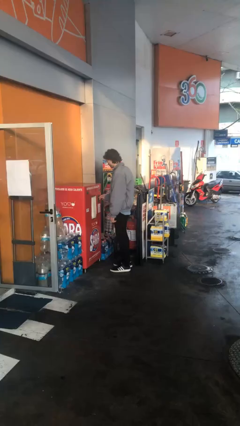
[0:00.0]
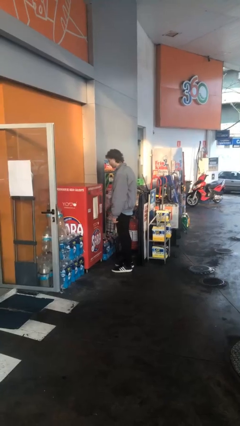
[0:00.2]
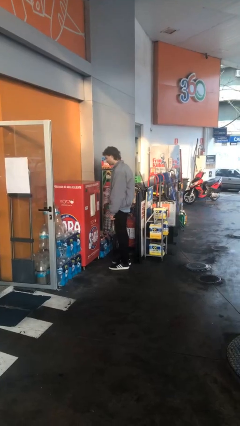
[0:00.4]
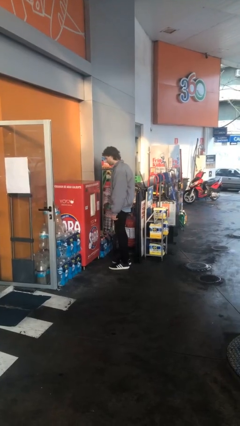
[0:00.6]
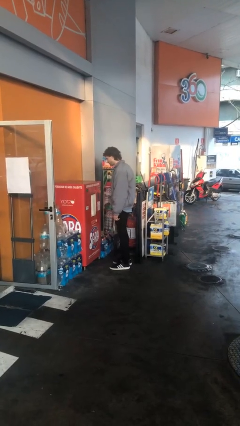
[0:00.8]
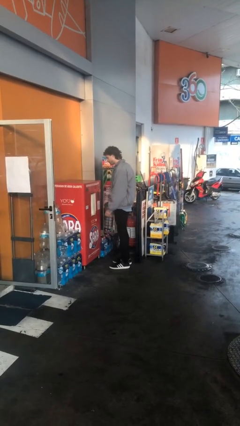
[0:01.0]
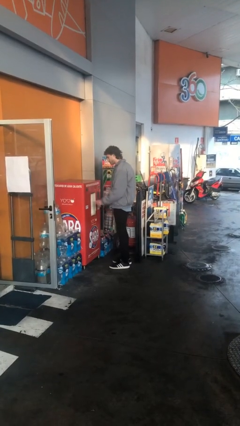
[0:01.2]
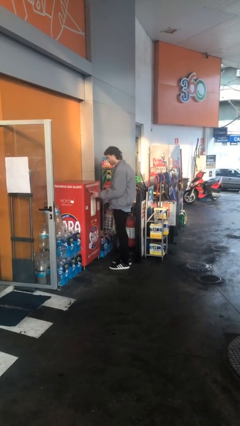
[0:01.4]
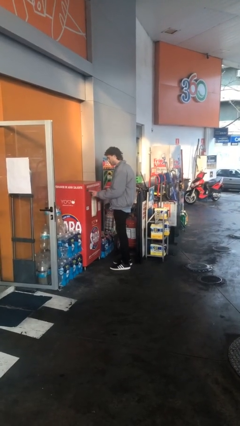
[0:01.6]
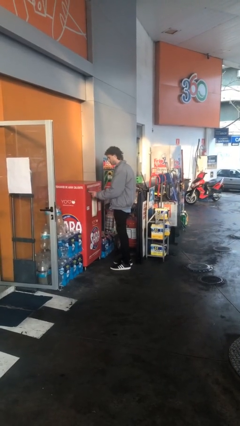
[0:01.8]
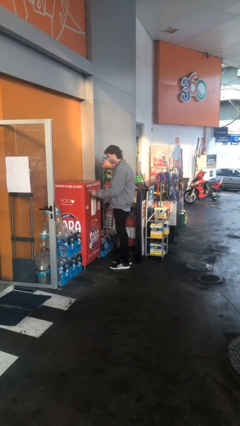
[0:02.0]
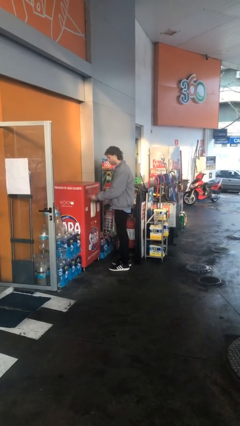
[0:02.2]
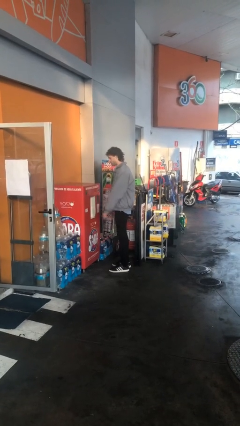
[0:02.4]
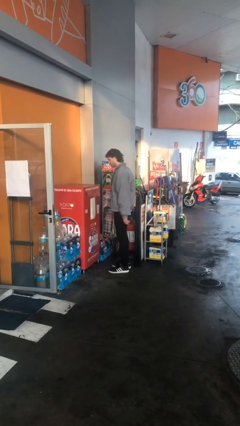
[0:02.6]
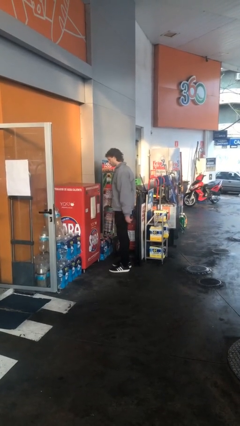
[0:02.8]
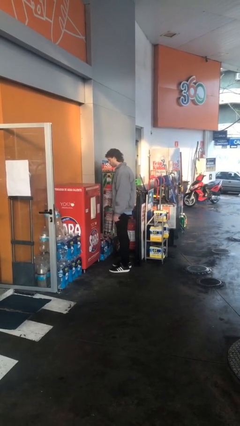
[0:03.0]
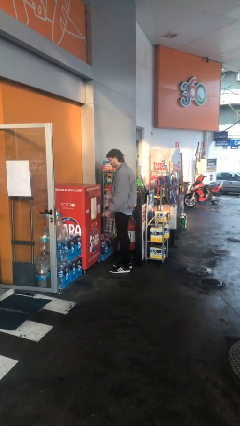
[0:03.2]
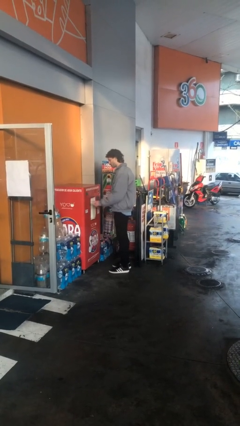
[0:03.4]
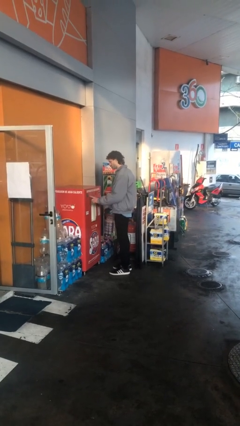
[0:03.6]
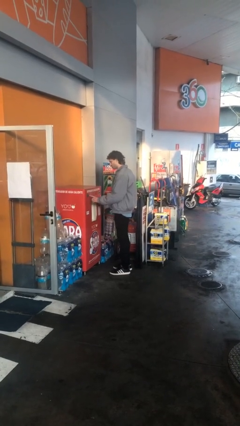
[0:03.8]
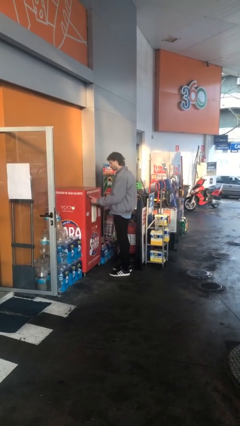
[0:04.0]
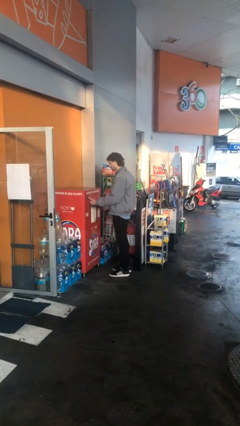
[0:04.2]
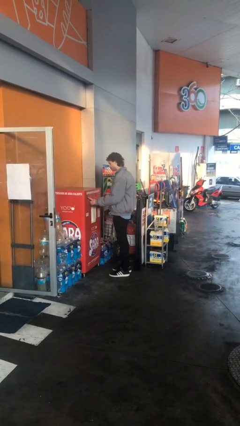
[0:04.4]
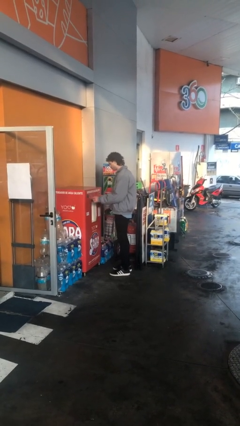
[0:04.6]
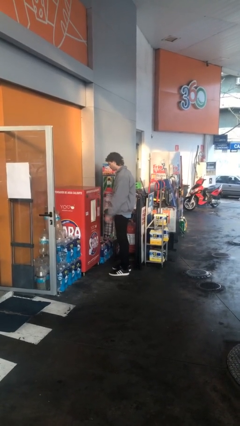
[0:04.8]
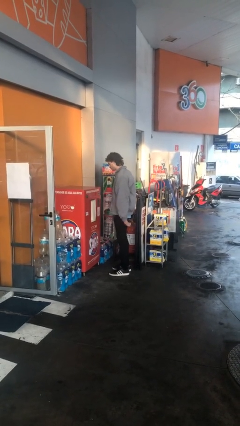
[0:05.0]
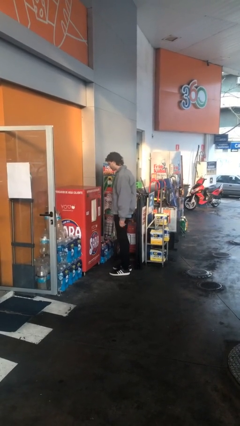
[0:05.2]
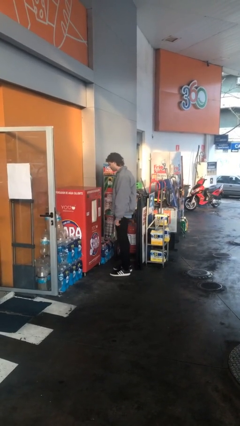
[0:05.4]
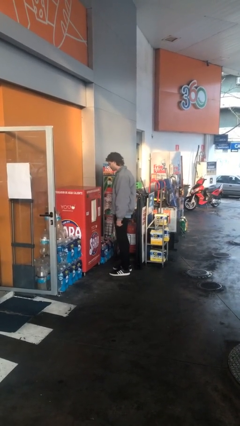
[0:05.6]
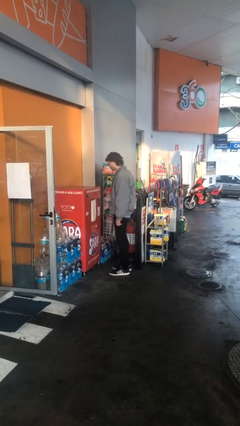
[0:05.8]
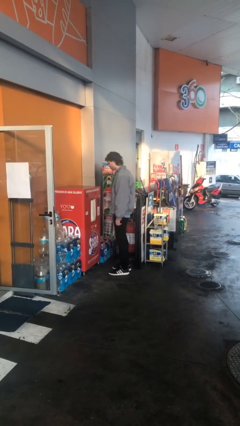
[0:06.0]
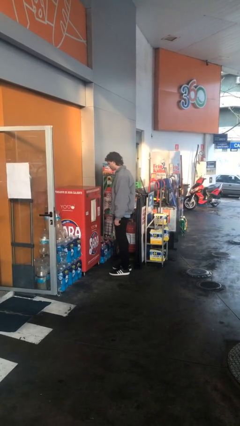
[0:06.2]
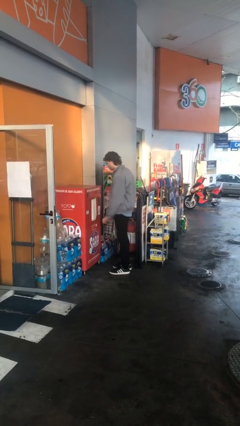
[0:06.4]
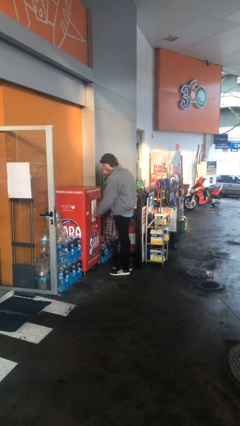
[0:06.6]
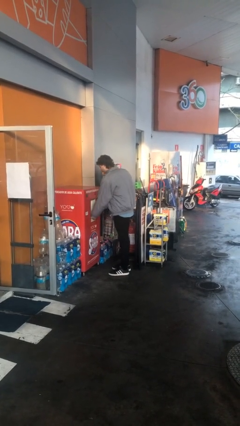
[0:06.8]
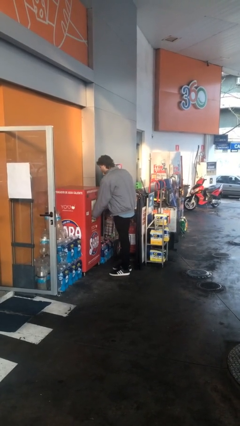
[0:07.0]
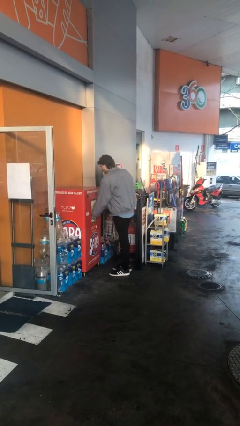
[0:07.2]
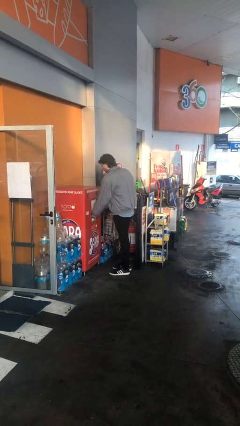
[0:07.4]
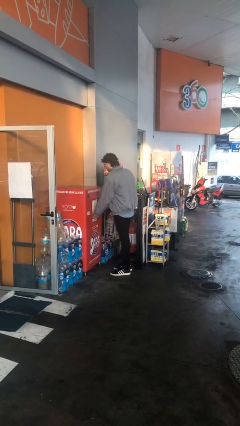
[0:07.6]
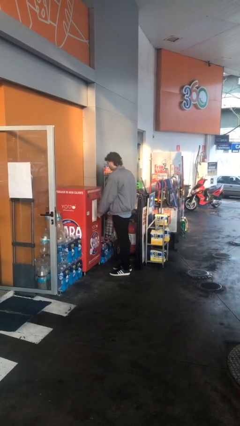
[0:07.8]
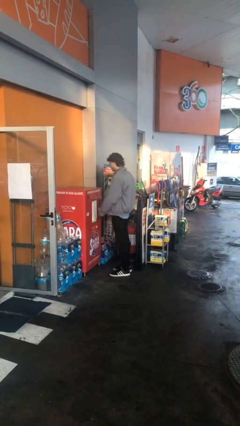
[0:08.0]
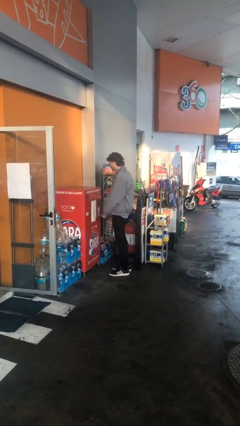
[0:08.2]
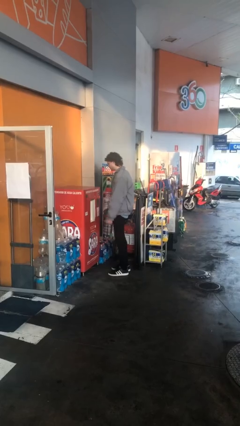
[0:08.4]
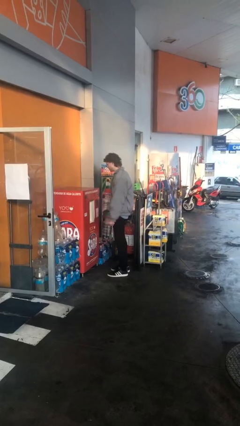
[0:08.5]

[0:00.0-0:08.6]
person purchases from machine

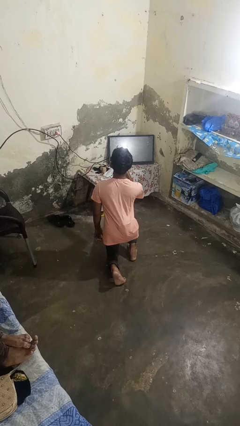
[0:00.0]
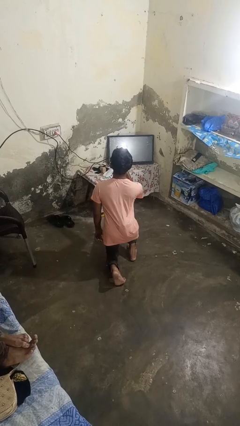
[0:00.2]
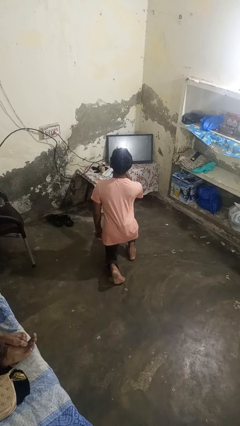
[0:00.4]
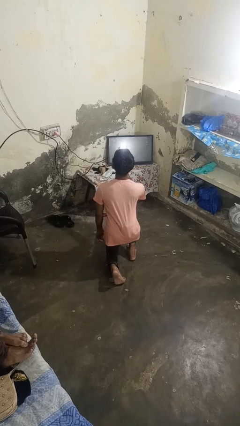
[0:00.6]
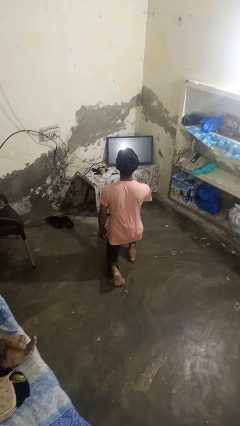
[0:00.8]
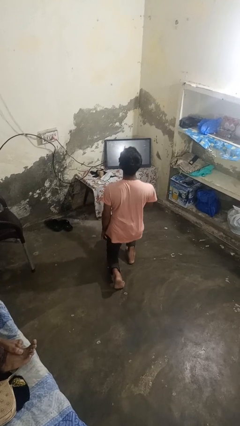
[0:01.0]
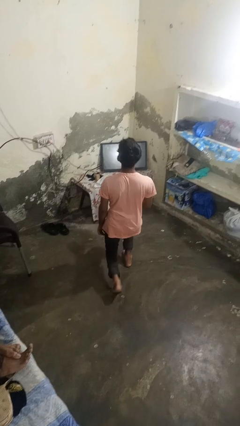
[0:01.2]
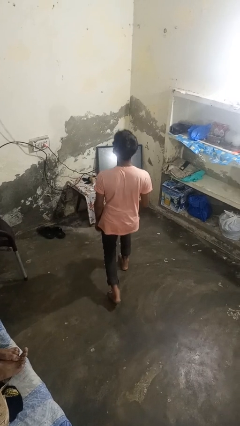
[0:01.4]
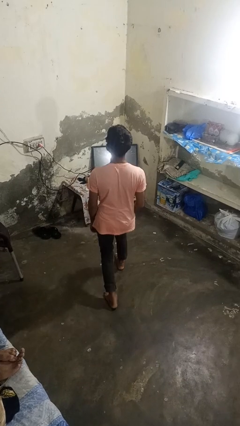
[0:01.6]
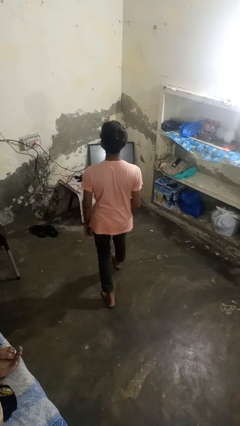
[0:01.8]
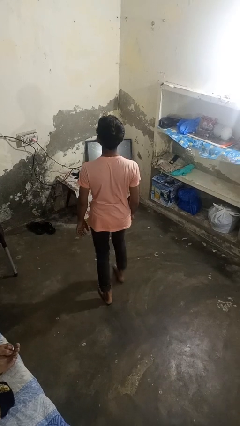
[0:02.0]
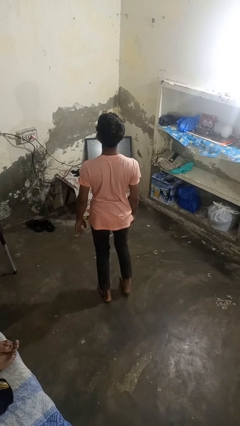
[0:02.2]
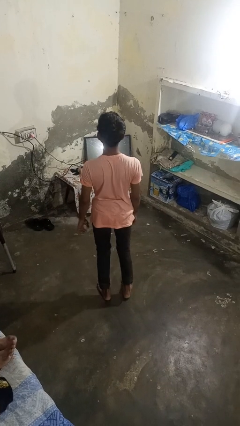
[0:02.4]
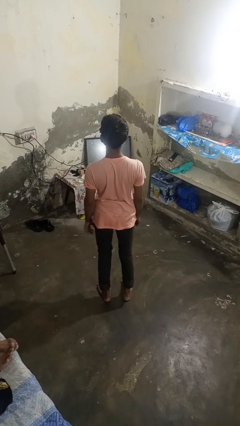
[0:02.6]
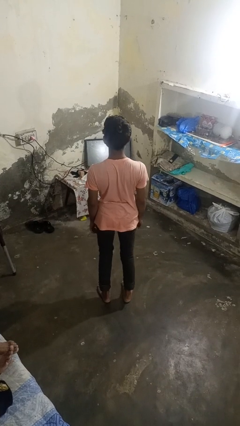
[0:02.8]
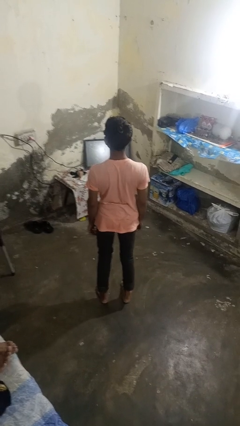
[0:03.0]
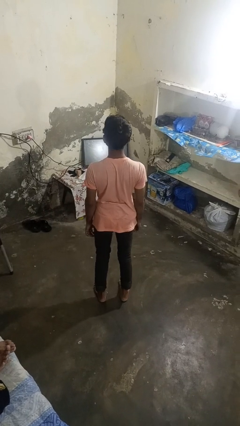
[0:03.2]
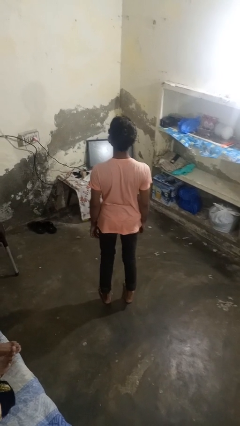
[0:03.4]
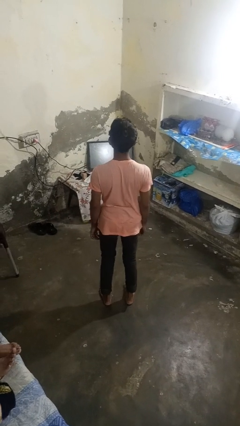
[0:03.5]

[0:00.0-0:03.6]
person stands up from floor

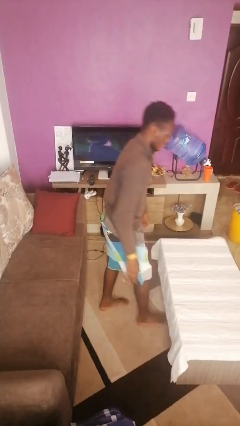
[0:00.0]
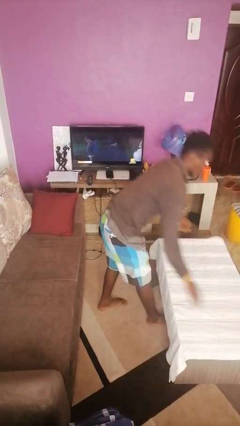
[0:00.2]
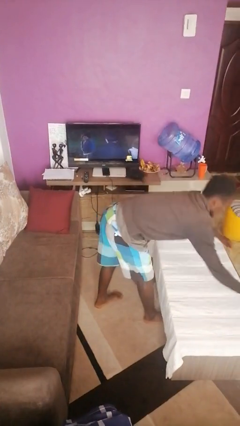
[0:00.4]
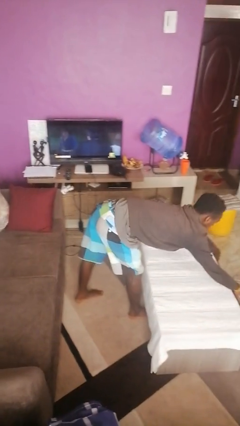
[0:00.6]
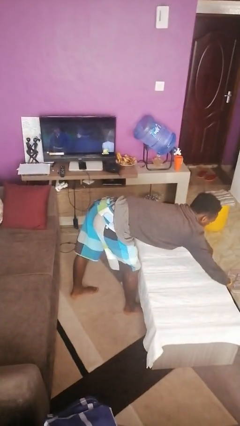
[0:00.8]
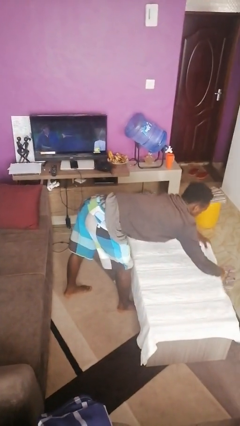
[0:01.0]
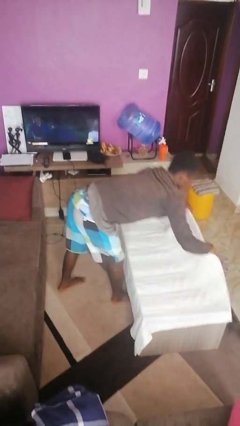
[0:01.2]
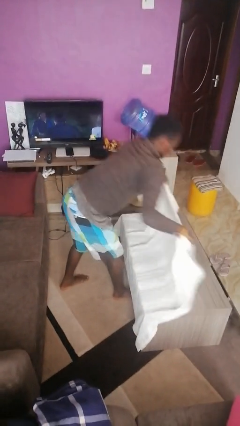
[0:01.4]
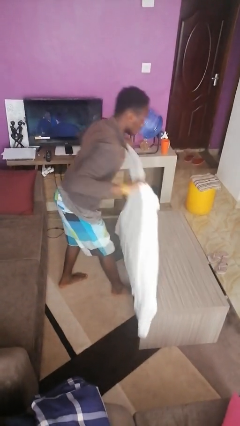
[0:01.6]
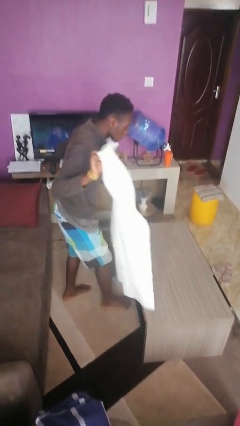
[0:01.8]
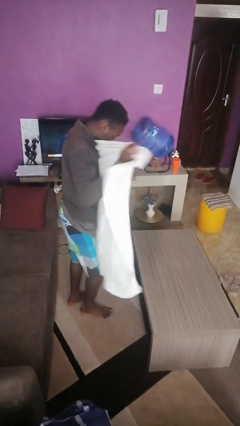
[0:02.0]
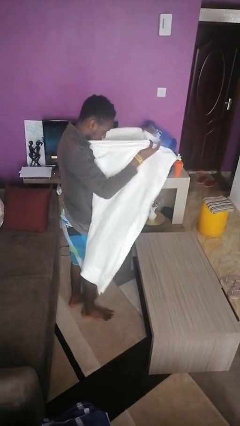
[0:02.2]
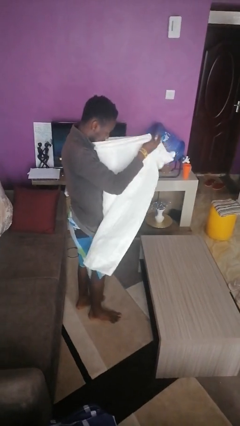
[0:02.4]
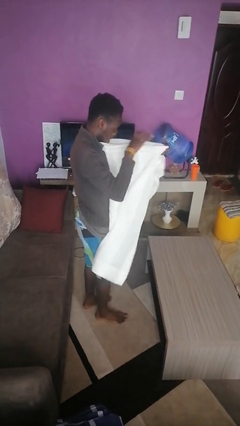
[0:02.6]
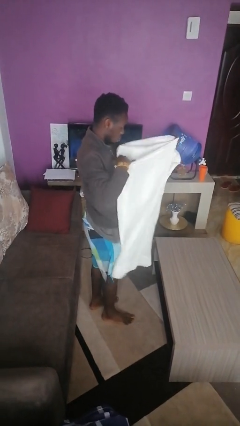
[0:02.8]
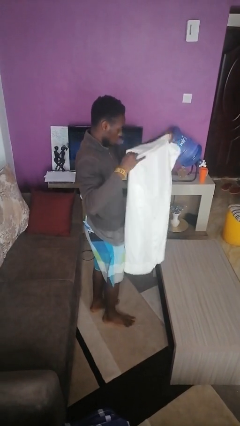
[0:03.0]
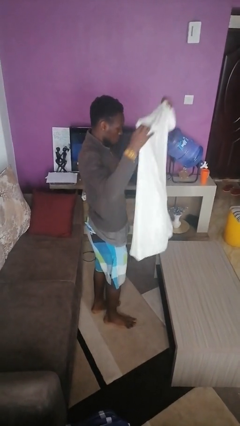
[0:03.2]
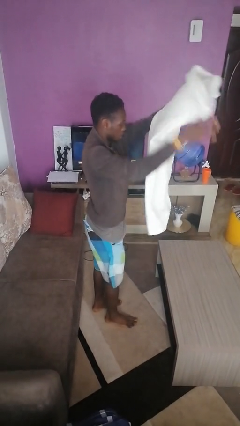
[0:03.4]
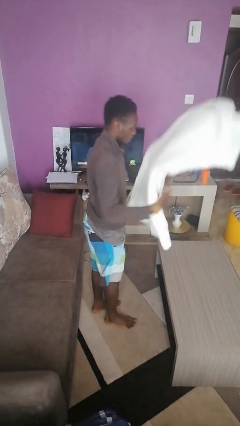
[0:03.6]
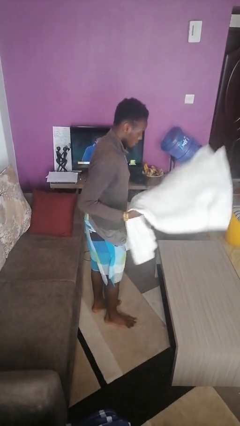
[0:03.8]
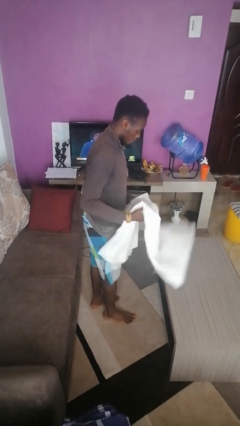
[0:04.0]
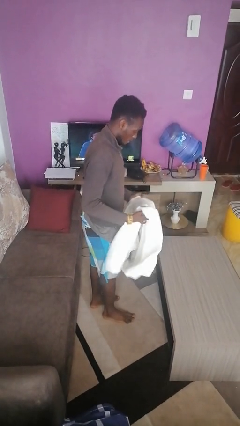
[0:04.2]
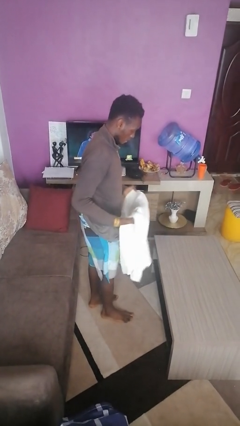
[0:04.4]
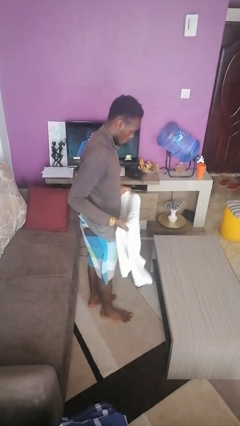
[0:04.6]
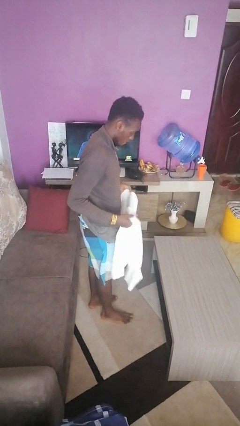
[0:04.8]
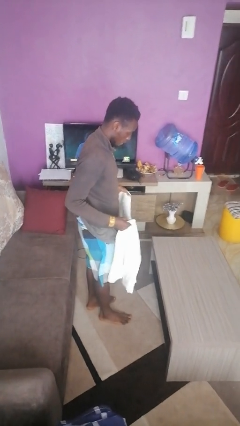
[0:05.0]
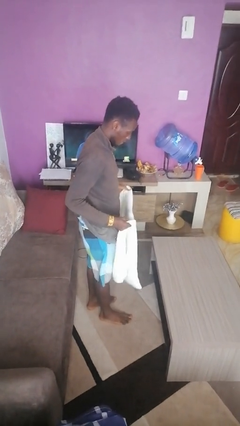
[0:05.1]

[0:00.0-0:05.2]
person folds tablecloth

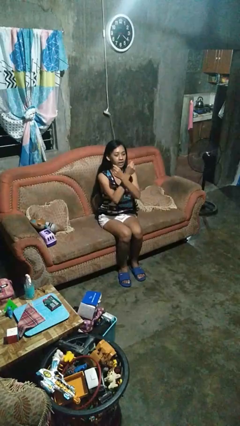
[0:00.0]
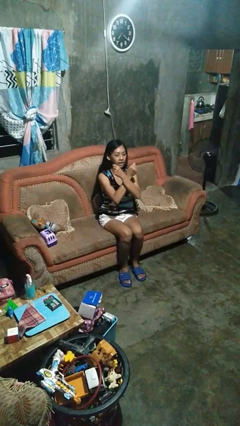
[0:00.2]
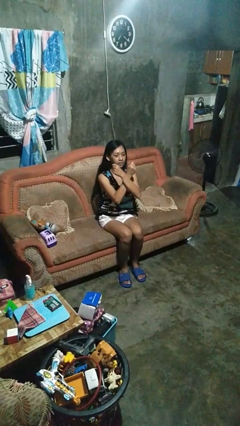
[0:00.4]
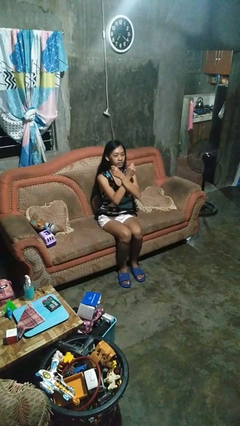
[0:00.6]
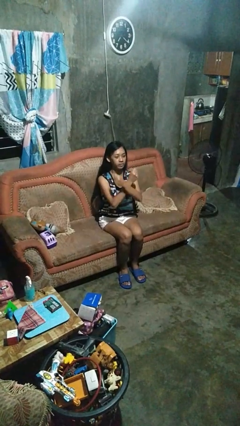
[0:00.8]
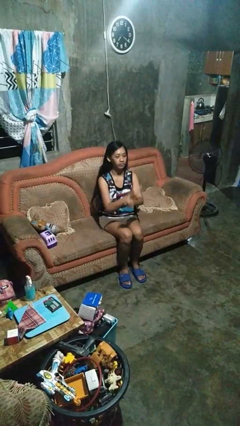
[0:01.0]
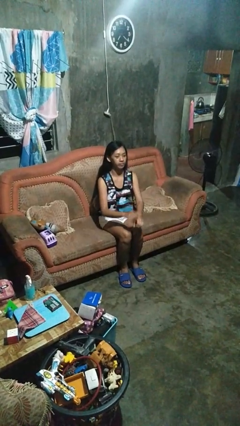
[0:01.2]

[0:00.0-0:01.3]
person gestures arms x
